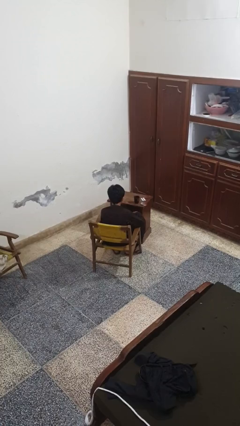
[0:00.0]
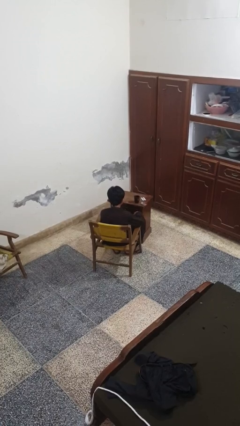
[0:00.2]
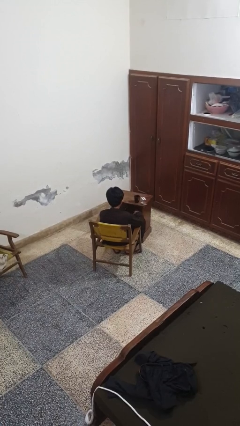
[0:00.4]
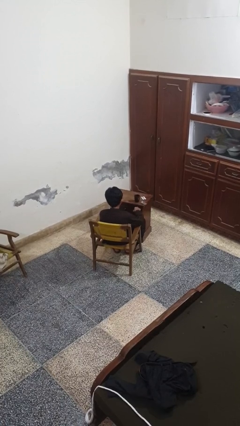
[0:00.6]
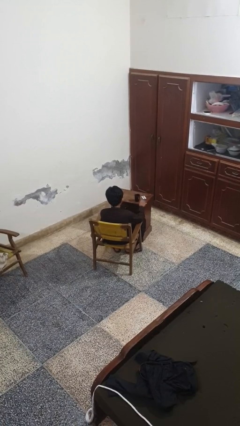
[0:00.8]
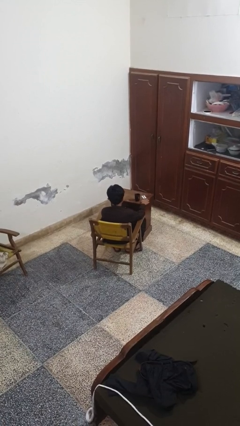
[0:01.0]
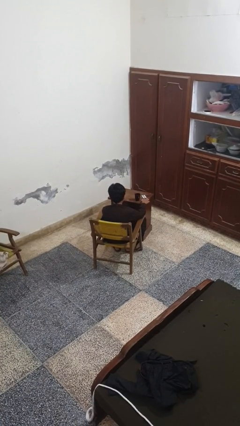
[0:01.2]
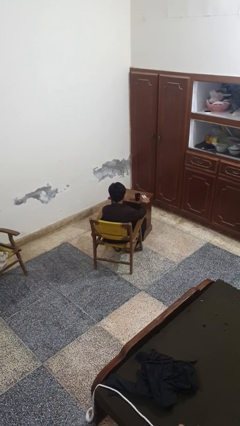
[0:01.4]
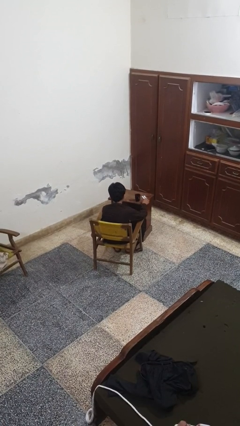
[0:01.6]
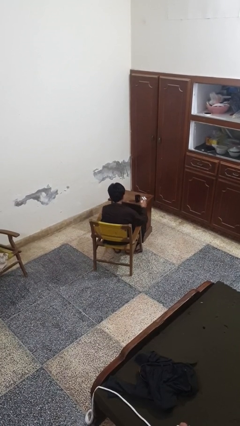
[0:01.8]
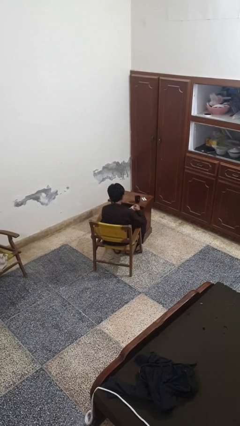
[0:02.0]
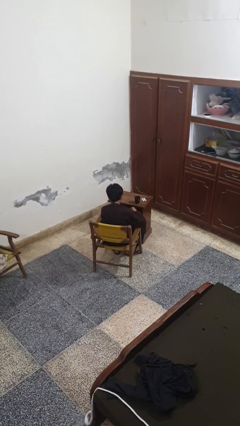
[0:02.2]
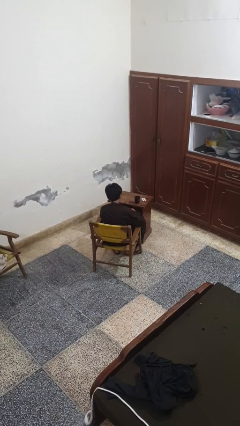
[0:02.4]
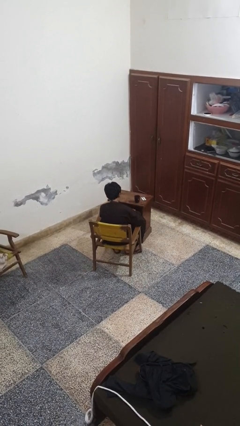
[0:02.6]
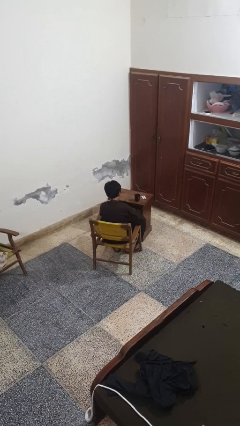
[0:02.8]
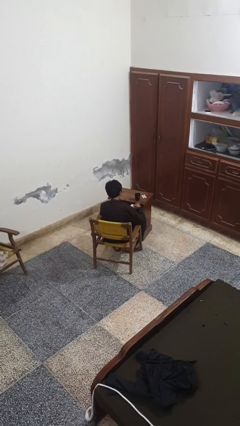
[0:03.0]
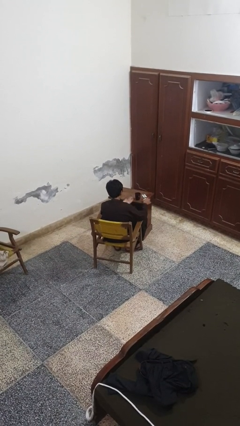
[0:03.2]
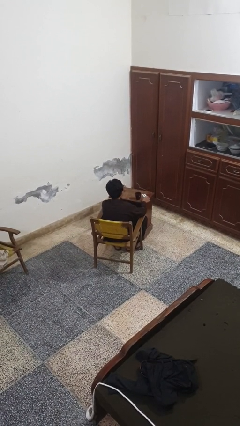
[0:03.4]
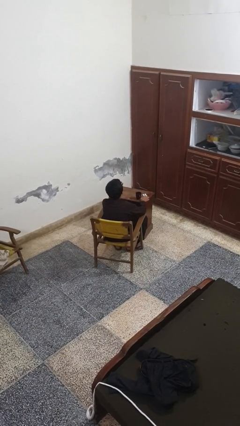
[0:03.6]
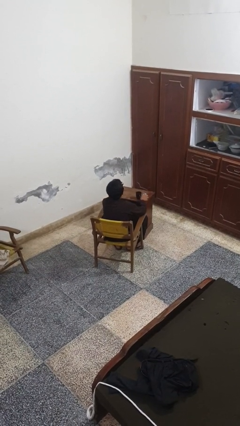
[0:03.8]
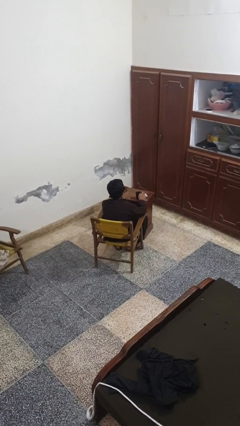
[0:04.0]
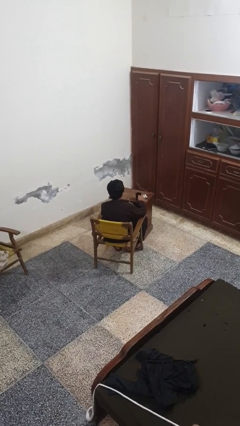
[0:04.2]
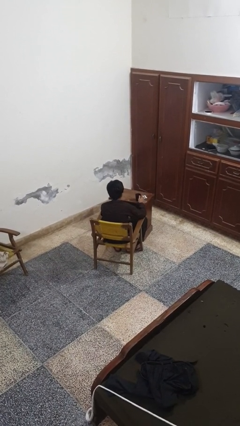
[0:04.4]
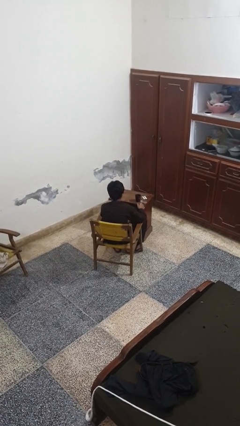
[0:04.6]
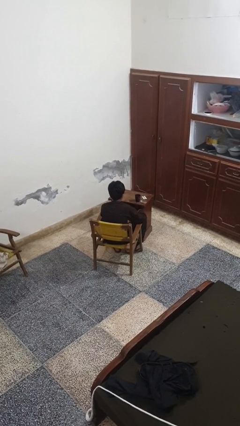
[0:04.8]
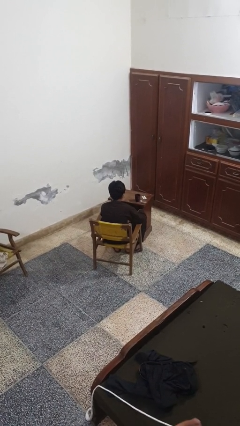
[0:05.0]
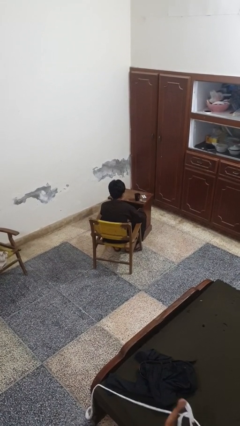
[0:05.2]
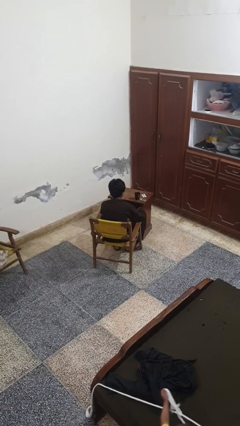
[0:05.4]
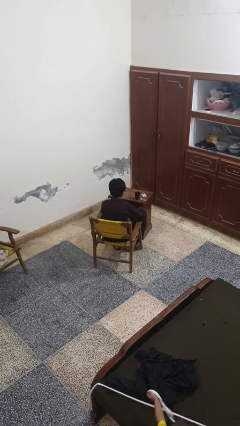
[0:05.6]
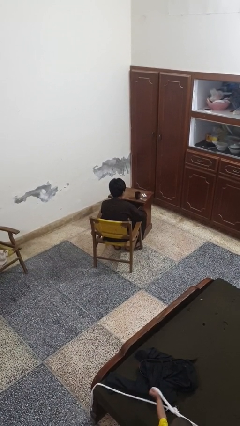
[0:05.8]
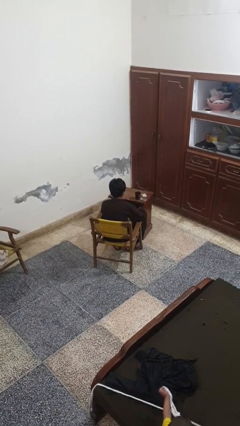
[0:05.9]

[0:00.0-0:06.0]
person takes medicine pills

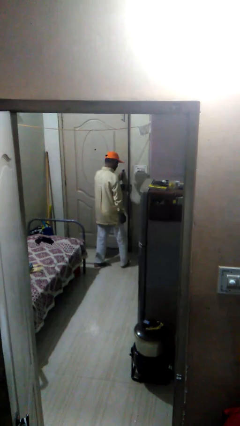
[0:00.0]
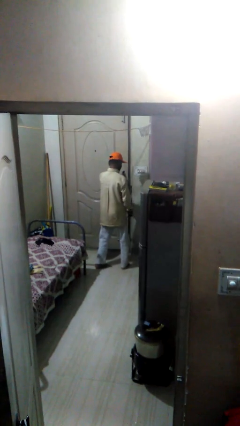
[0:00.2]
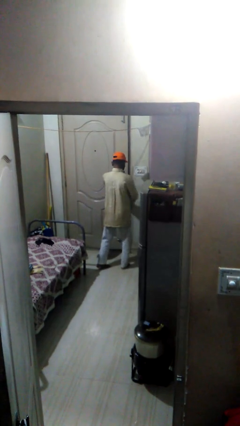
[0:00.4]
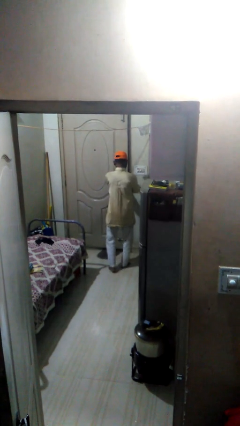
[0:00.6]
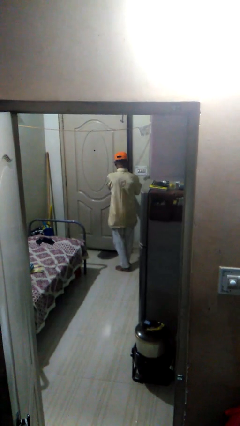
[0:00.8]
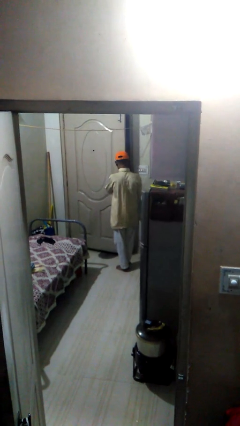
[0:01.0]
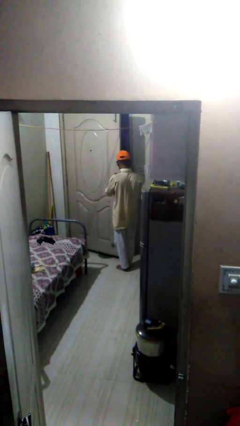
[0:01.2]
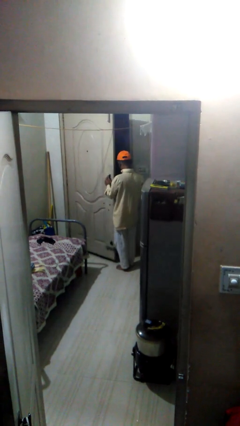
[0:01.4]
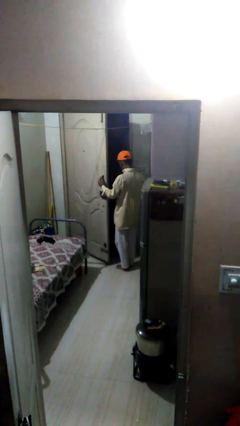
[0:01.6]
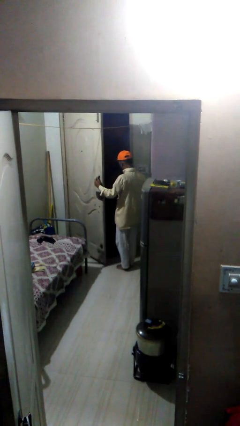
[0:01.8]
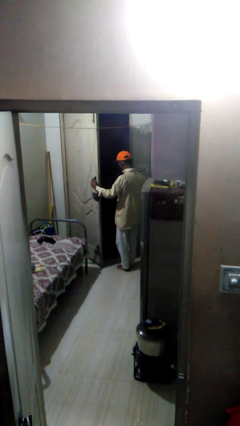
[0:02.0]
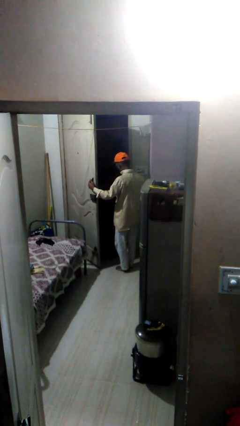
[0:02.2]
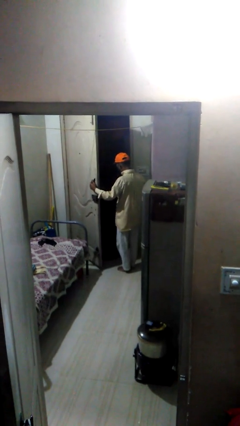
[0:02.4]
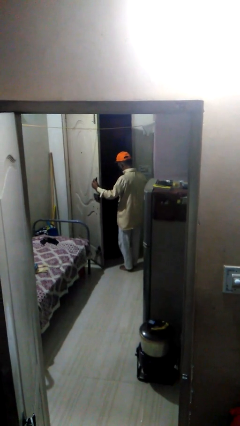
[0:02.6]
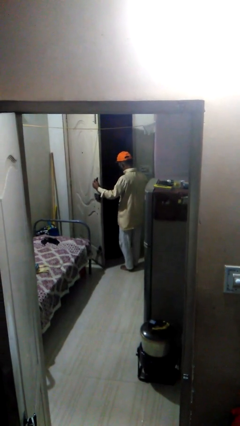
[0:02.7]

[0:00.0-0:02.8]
person opens facility door

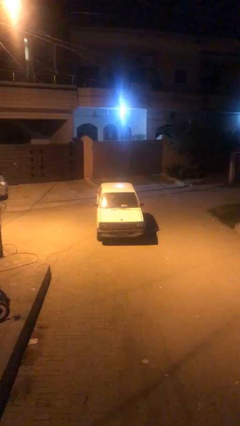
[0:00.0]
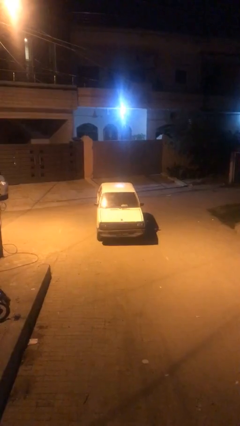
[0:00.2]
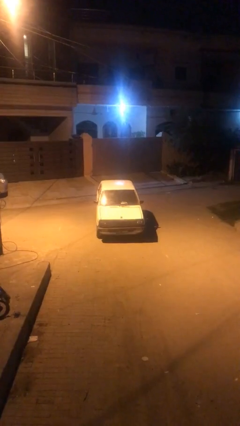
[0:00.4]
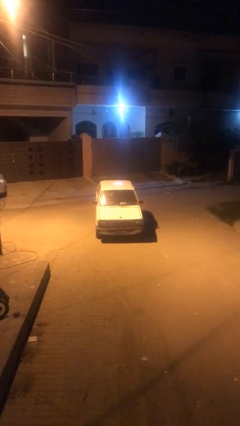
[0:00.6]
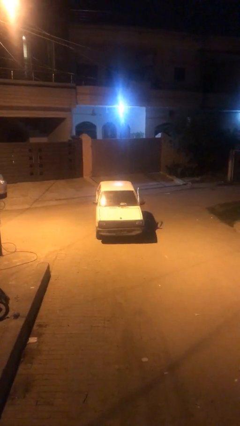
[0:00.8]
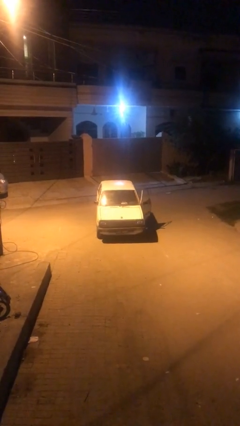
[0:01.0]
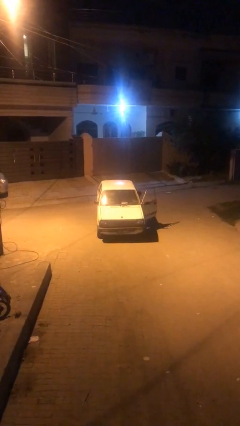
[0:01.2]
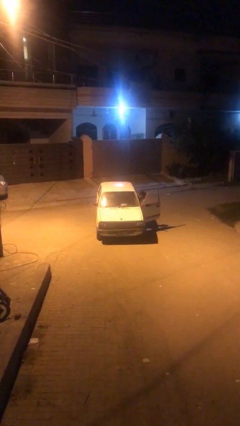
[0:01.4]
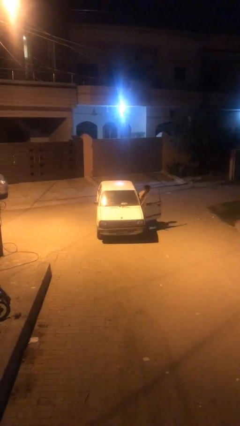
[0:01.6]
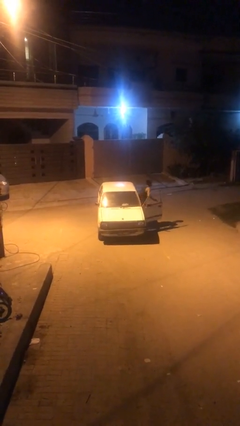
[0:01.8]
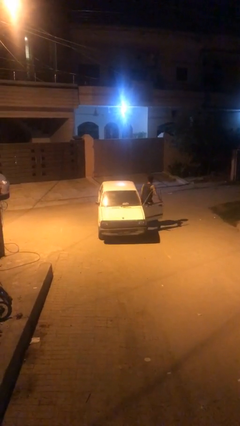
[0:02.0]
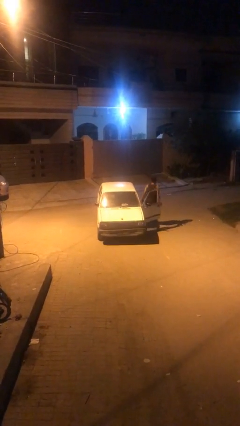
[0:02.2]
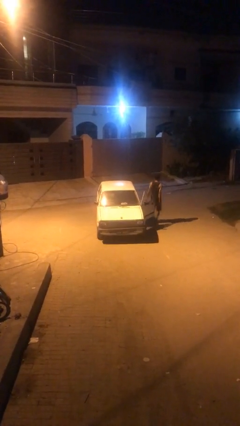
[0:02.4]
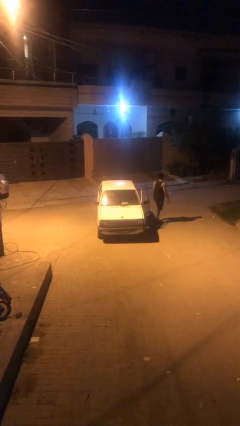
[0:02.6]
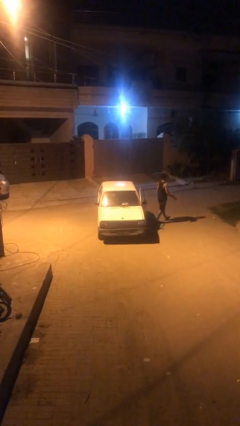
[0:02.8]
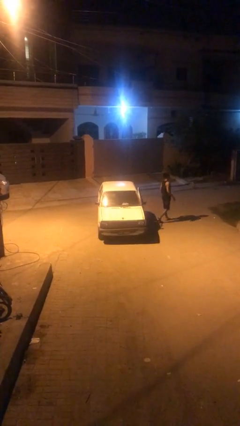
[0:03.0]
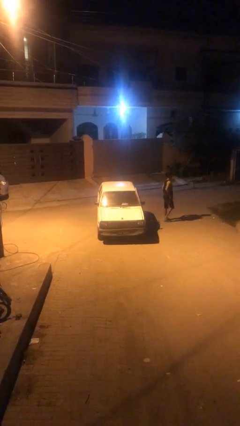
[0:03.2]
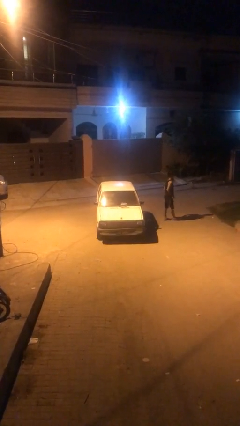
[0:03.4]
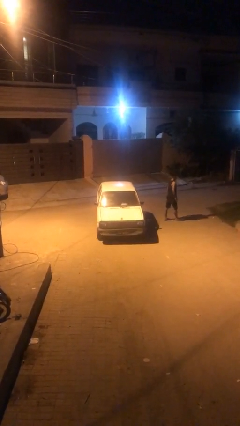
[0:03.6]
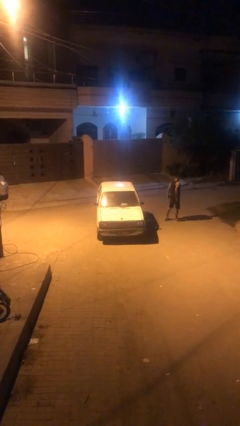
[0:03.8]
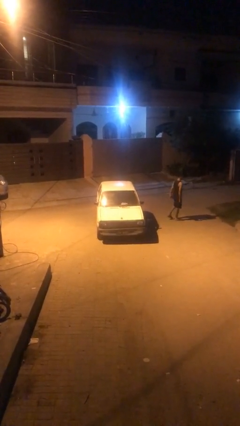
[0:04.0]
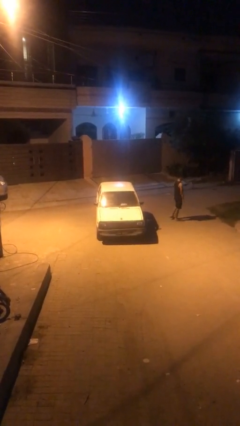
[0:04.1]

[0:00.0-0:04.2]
car drops off person

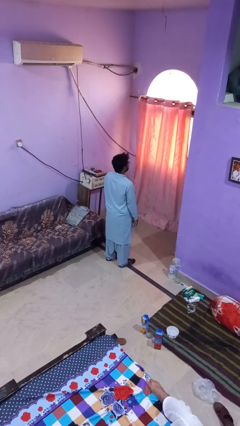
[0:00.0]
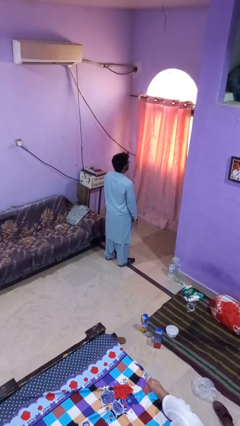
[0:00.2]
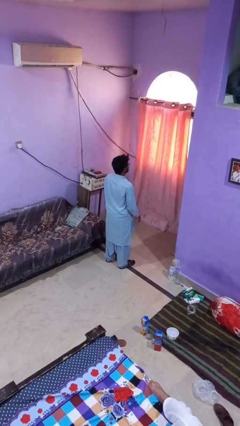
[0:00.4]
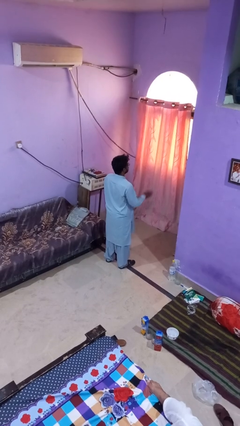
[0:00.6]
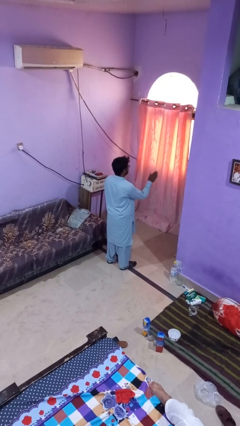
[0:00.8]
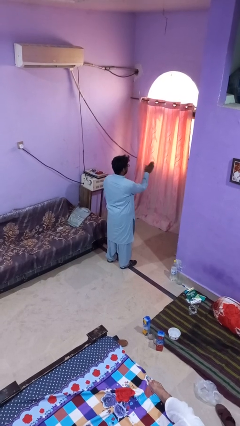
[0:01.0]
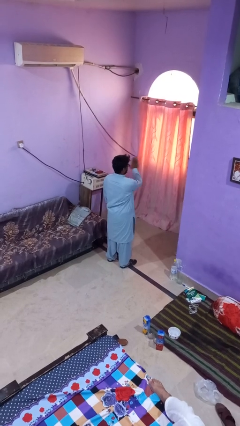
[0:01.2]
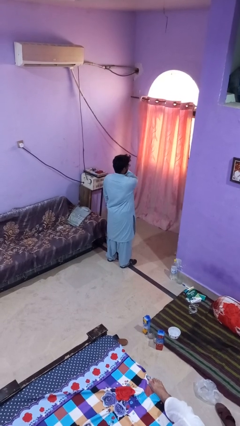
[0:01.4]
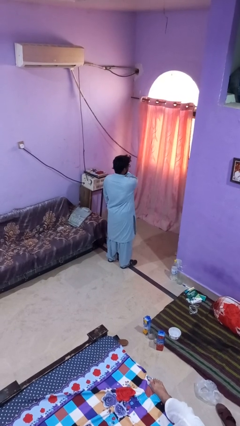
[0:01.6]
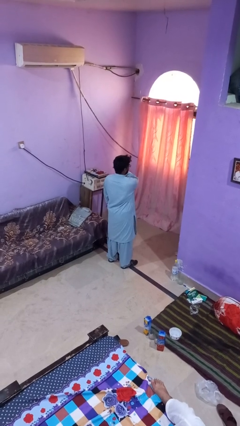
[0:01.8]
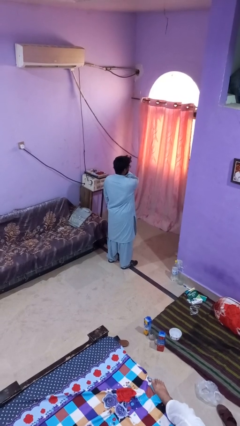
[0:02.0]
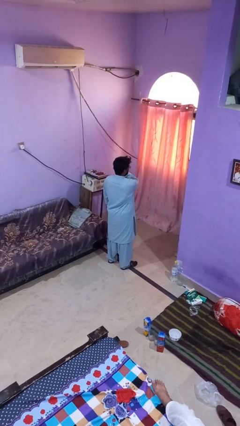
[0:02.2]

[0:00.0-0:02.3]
person gestures swipe left

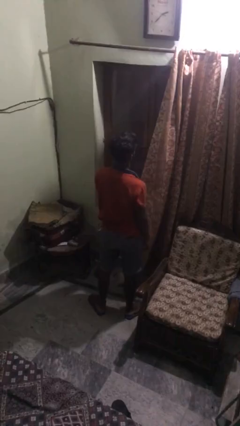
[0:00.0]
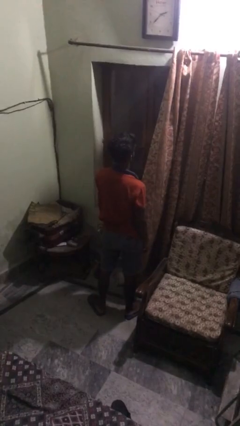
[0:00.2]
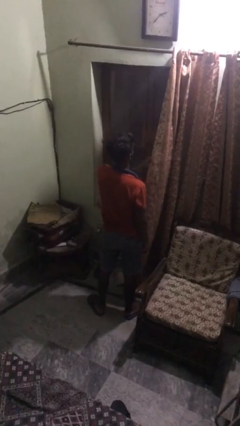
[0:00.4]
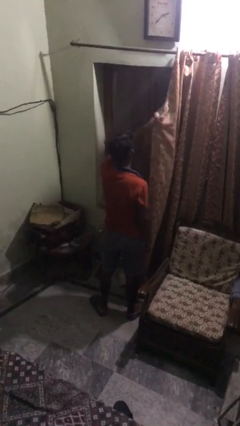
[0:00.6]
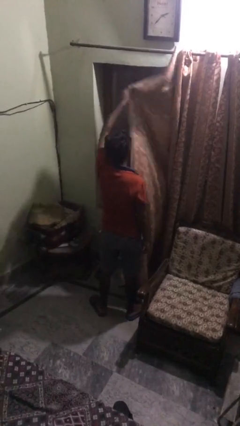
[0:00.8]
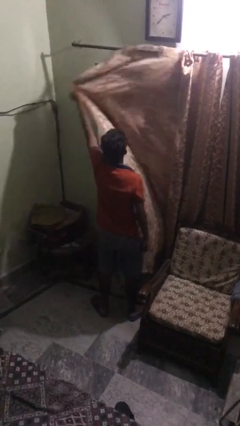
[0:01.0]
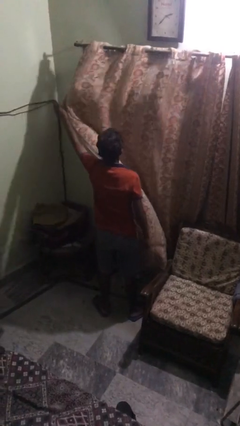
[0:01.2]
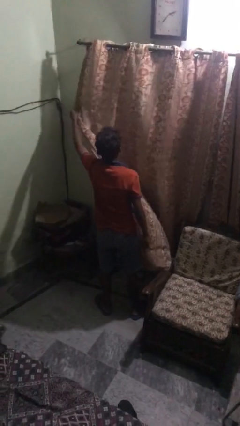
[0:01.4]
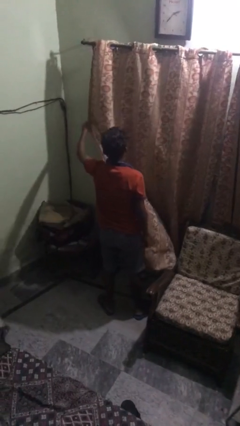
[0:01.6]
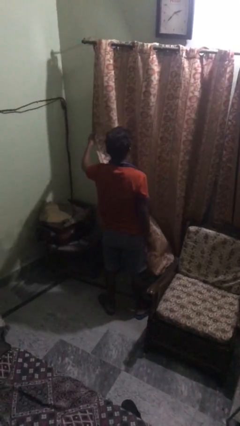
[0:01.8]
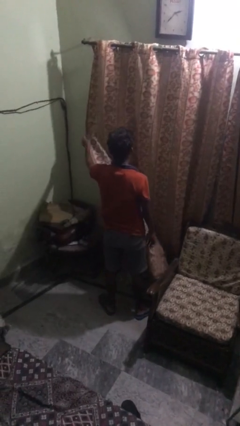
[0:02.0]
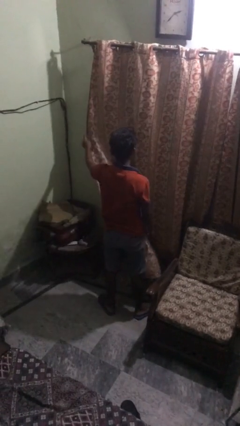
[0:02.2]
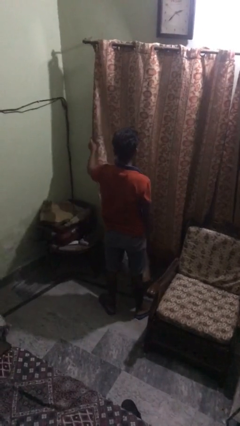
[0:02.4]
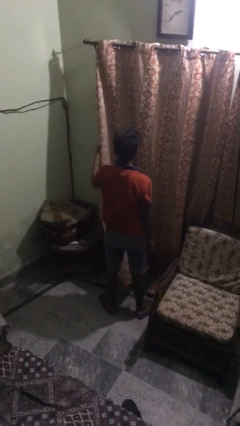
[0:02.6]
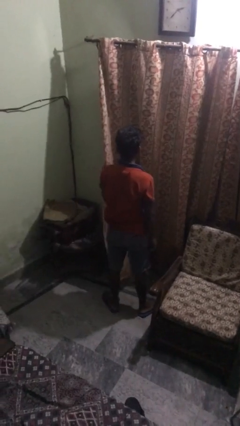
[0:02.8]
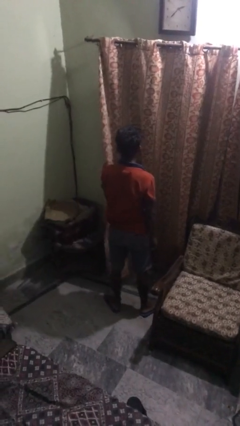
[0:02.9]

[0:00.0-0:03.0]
person closes curtains
